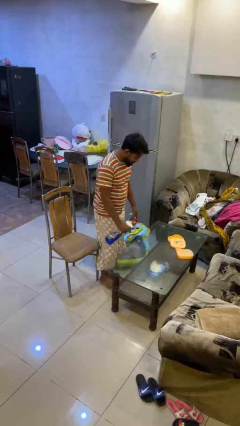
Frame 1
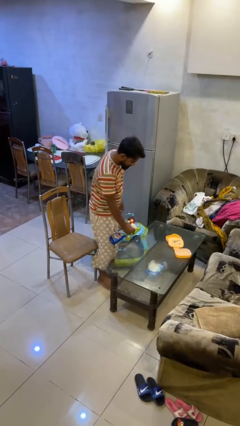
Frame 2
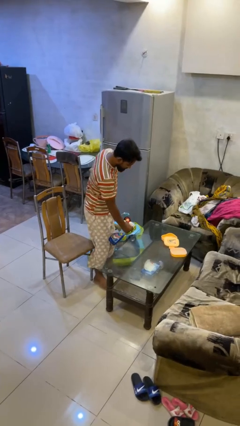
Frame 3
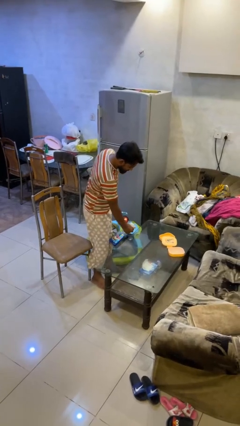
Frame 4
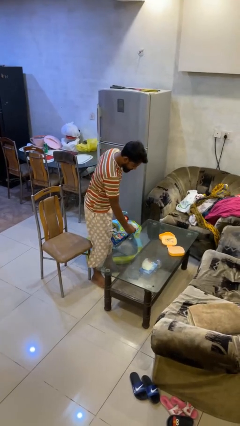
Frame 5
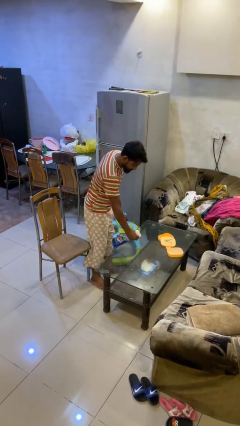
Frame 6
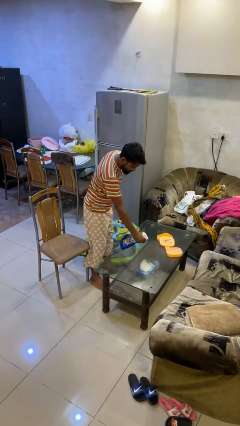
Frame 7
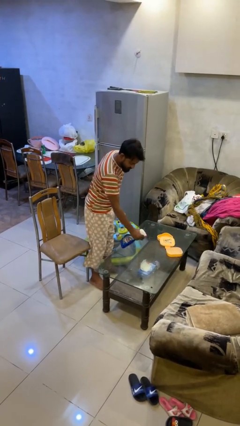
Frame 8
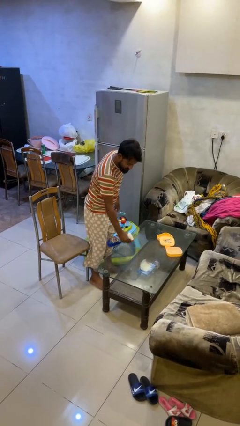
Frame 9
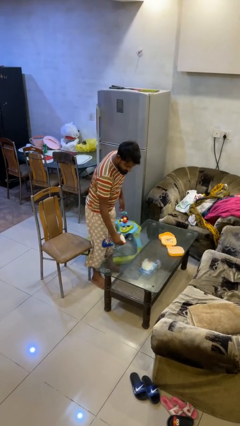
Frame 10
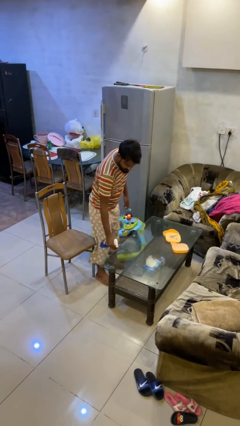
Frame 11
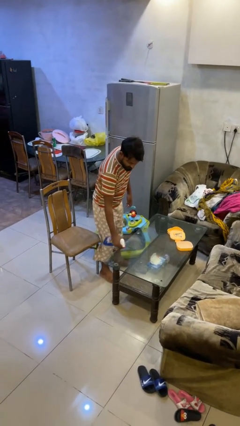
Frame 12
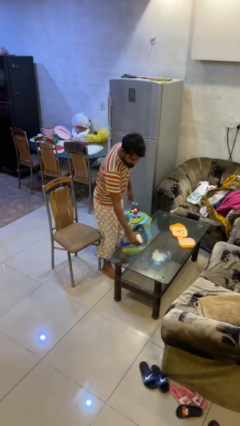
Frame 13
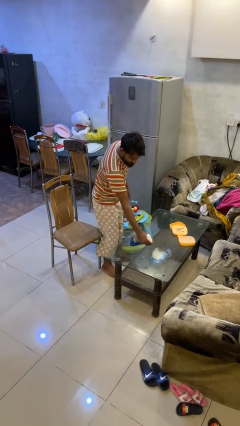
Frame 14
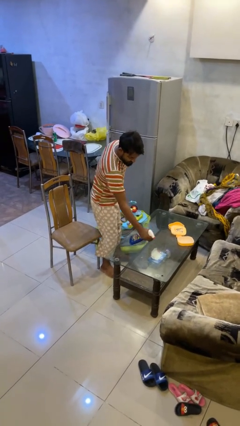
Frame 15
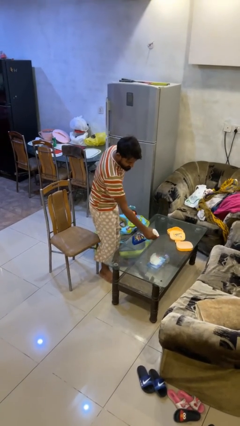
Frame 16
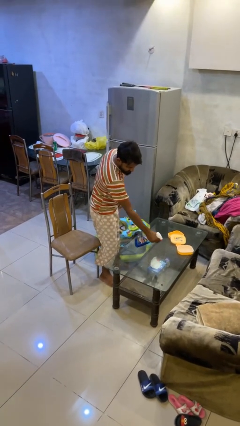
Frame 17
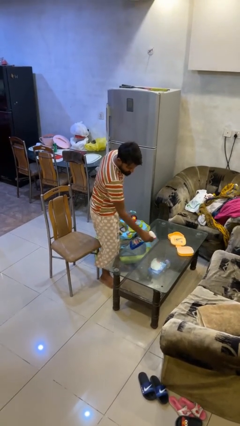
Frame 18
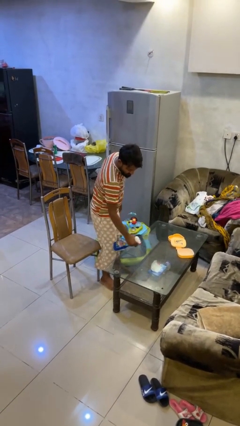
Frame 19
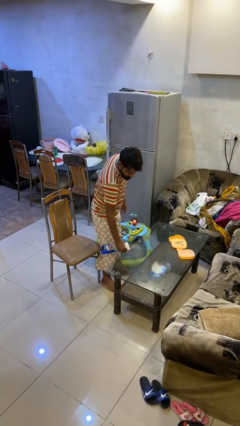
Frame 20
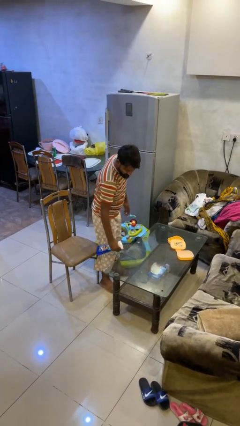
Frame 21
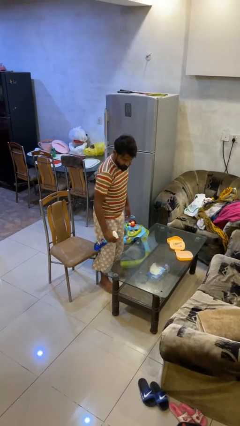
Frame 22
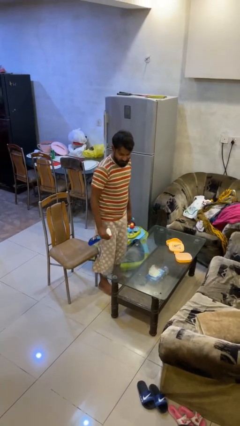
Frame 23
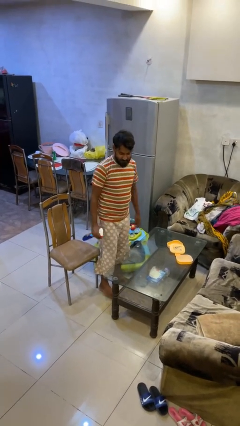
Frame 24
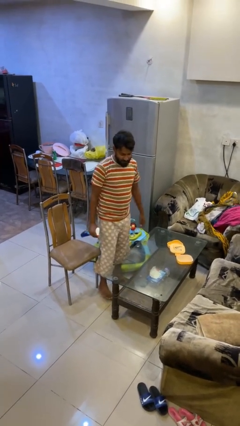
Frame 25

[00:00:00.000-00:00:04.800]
person sprays from bottle

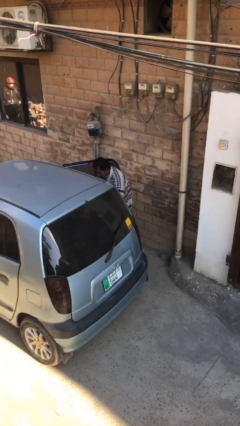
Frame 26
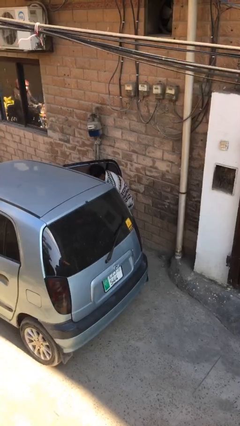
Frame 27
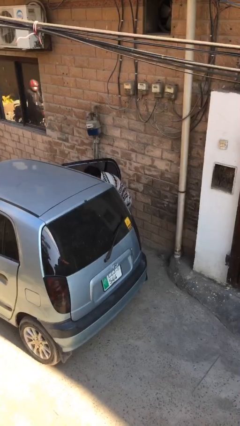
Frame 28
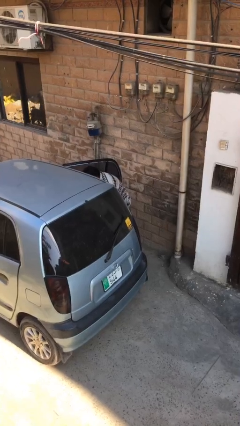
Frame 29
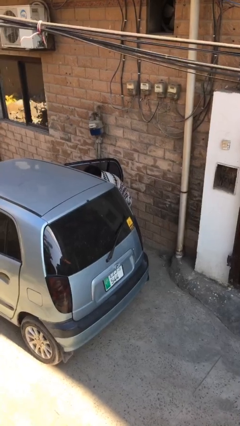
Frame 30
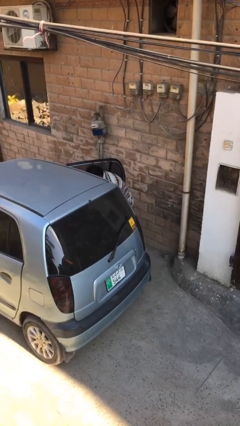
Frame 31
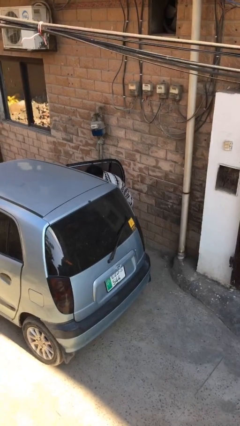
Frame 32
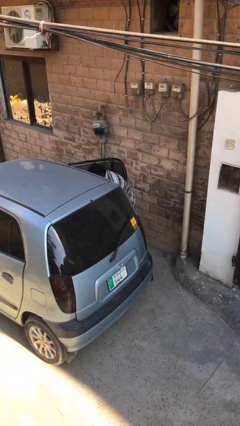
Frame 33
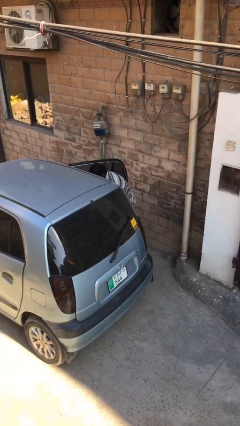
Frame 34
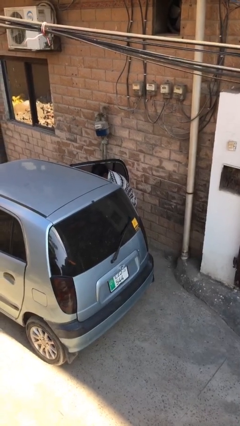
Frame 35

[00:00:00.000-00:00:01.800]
person loads car

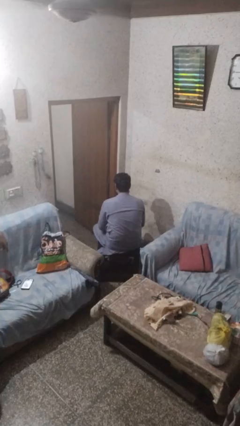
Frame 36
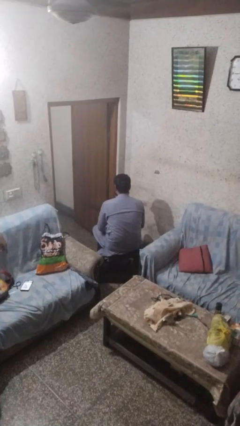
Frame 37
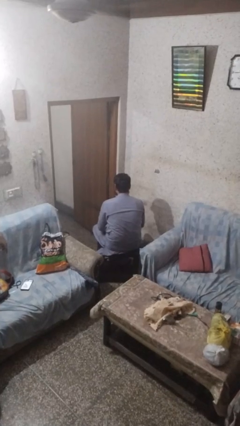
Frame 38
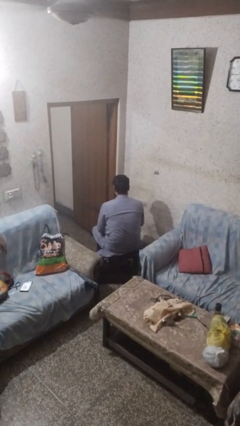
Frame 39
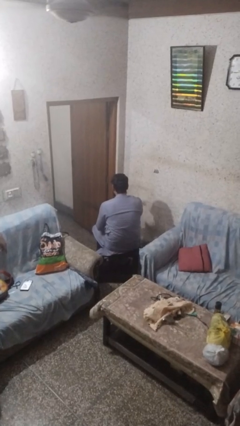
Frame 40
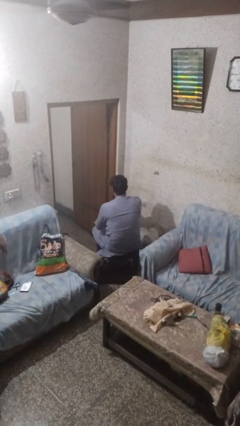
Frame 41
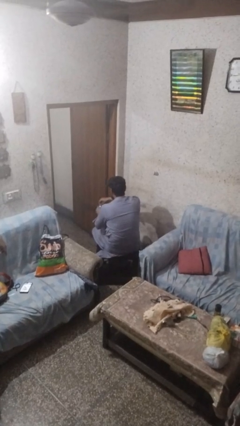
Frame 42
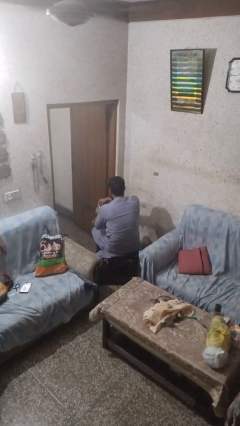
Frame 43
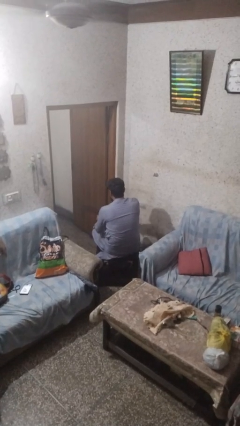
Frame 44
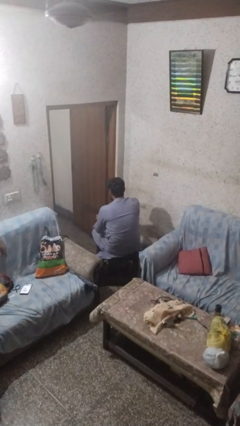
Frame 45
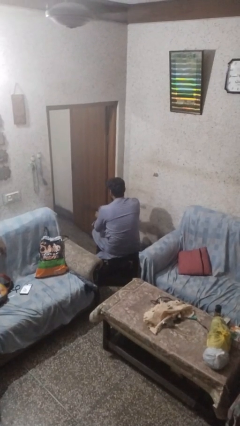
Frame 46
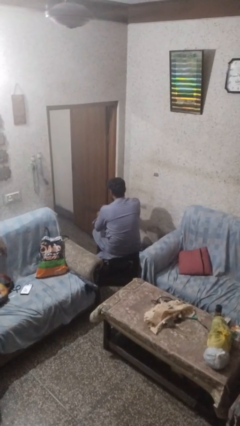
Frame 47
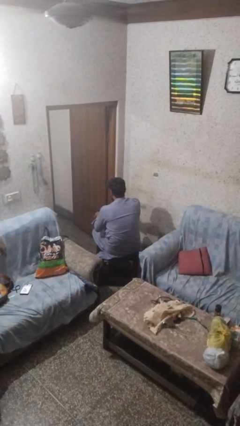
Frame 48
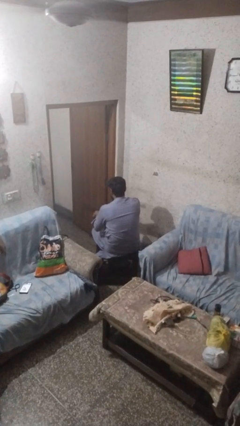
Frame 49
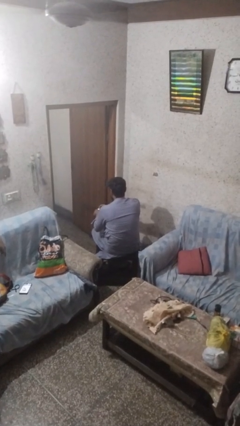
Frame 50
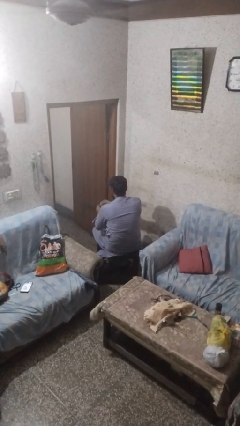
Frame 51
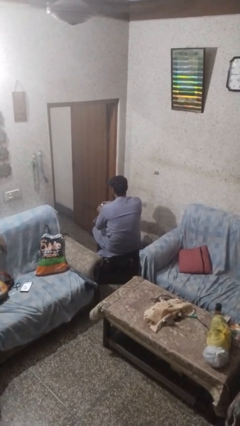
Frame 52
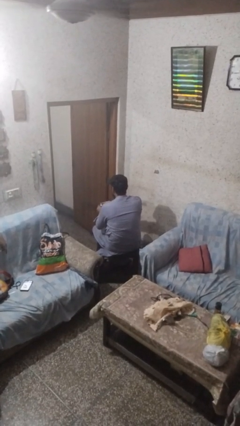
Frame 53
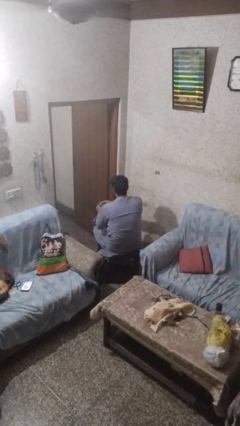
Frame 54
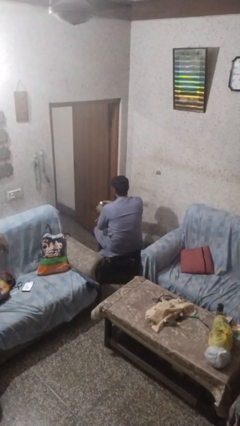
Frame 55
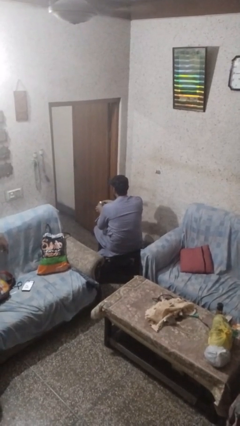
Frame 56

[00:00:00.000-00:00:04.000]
person opens beverage can

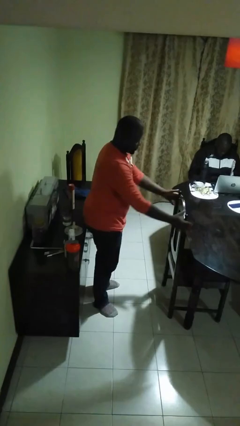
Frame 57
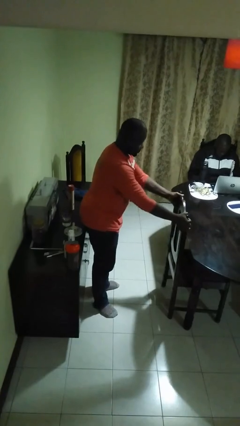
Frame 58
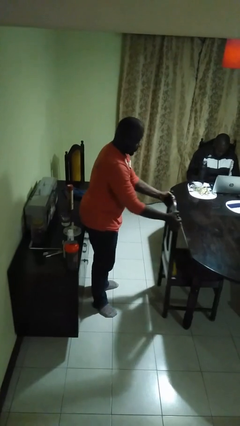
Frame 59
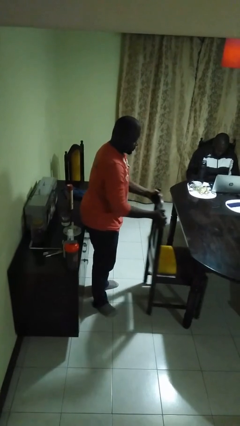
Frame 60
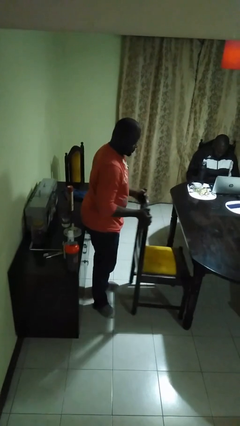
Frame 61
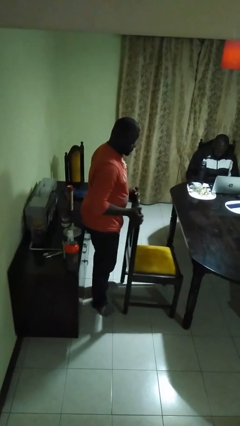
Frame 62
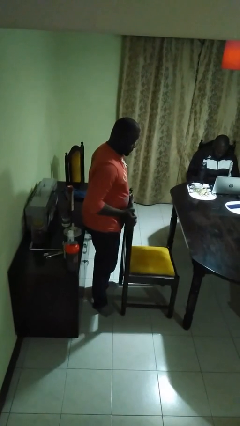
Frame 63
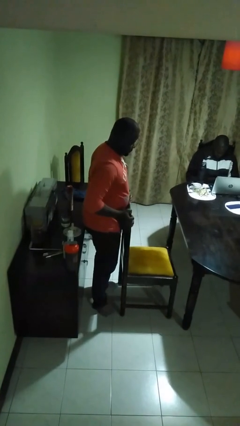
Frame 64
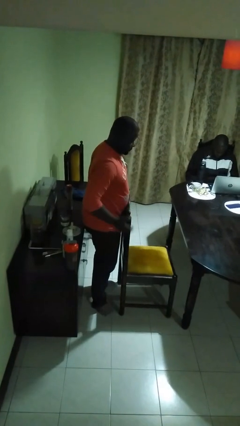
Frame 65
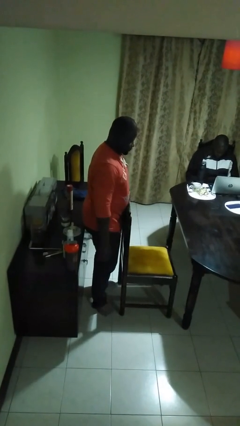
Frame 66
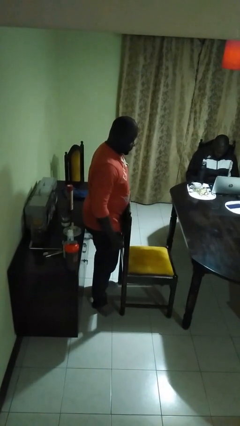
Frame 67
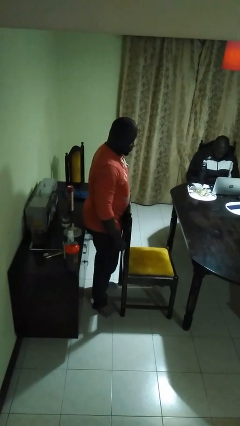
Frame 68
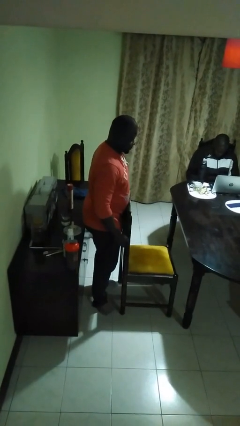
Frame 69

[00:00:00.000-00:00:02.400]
person pulls out chair

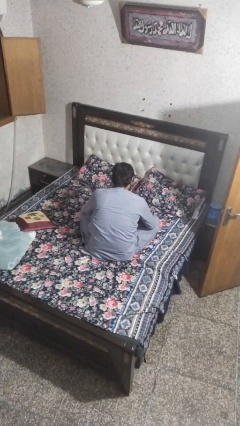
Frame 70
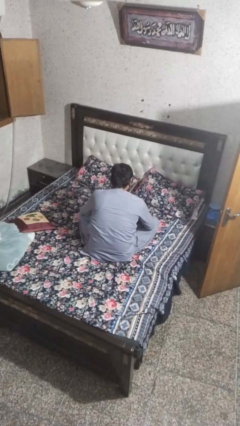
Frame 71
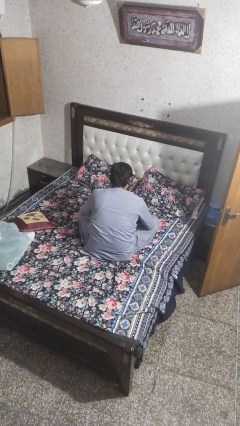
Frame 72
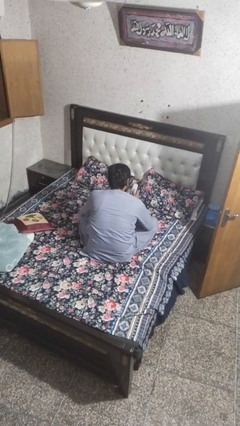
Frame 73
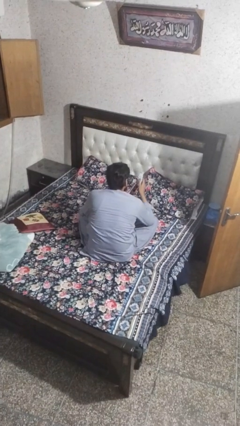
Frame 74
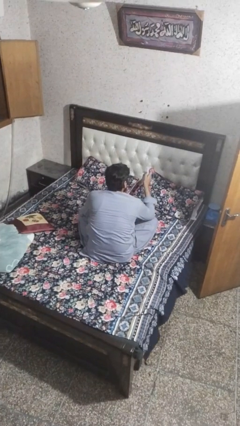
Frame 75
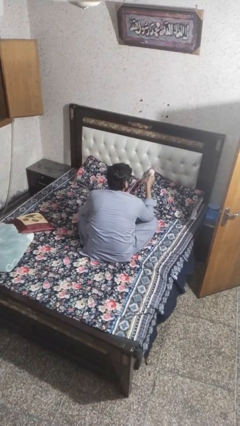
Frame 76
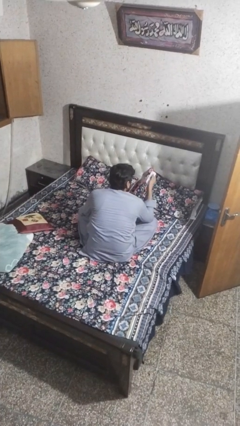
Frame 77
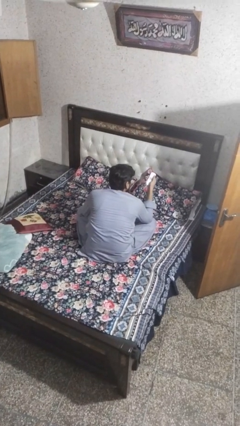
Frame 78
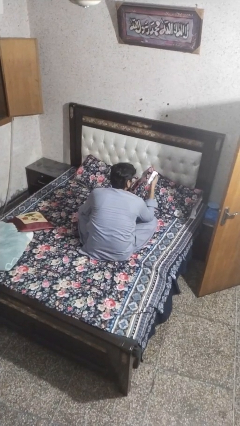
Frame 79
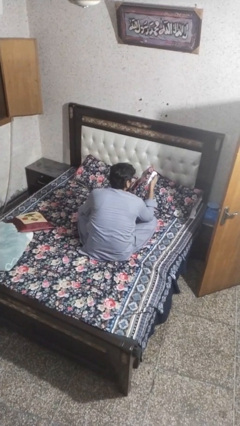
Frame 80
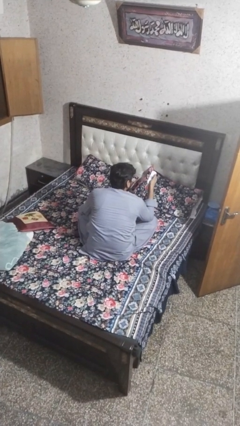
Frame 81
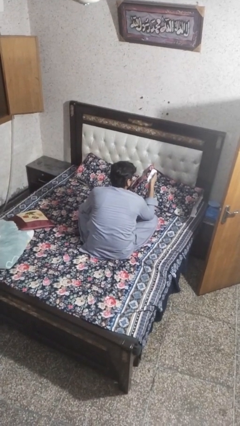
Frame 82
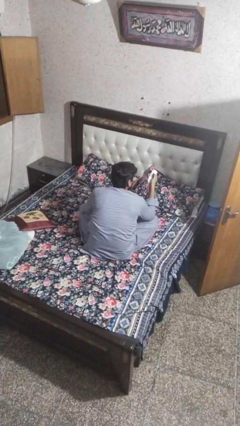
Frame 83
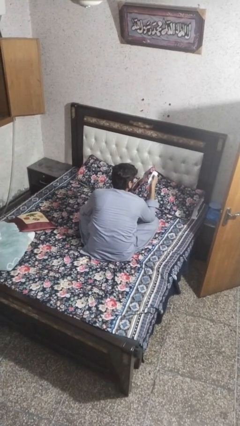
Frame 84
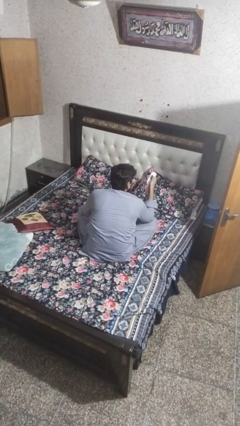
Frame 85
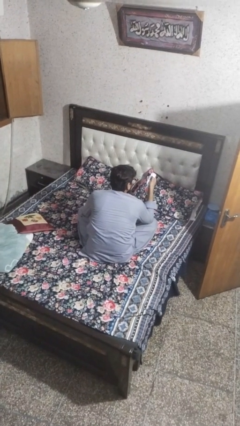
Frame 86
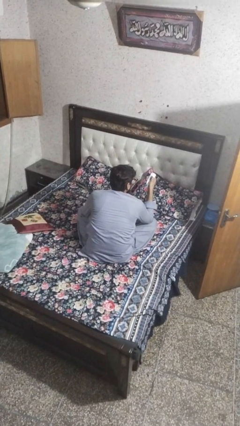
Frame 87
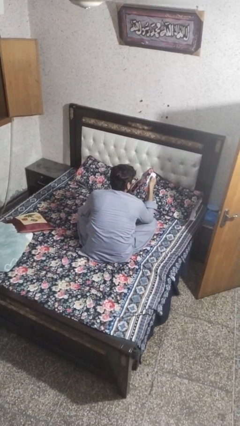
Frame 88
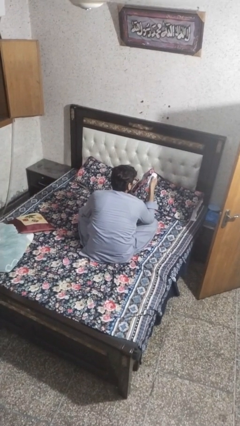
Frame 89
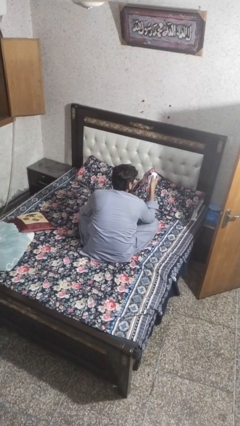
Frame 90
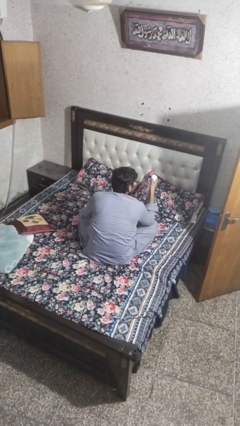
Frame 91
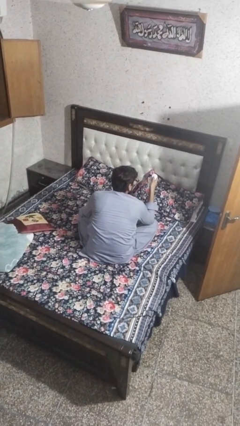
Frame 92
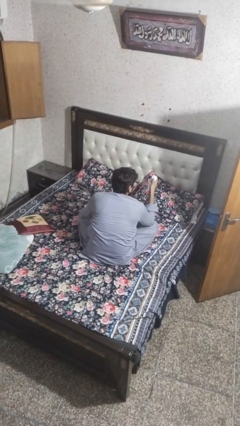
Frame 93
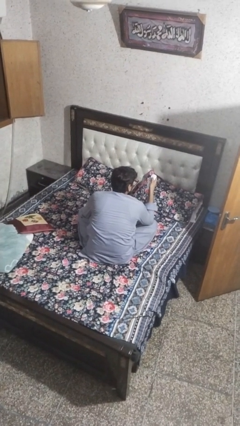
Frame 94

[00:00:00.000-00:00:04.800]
person uses television remote
